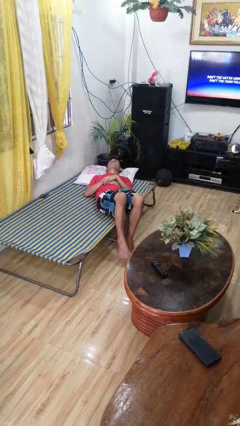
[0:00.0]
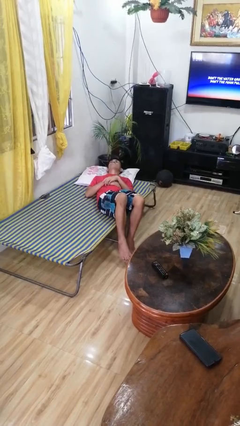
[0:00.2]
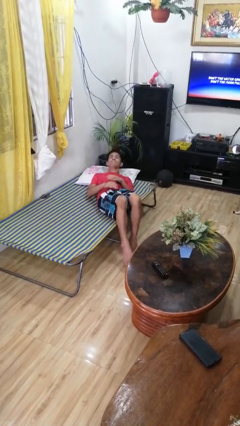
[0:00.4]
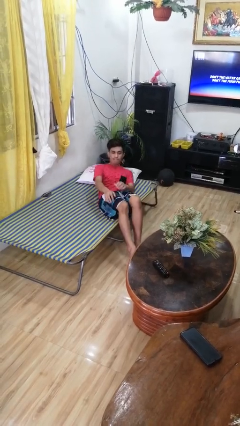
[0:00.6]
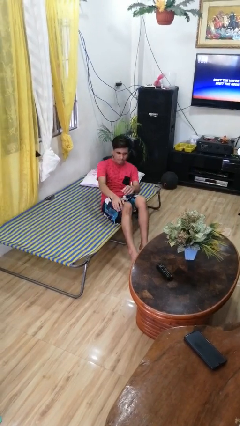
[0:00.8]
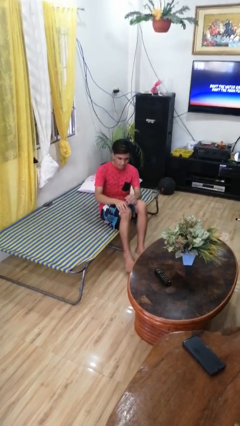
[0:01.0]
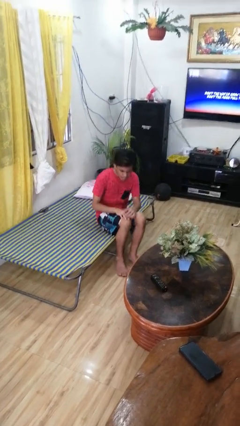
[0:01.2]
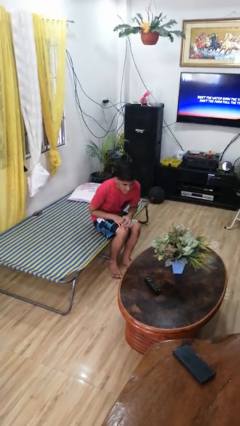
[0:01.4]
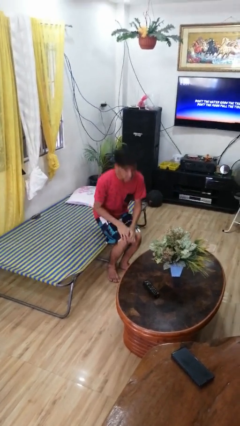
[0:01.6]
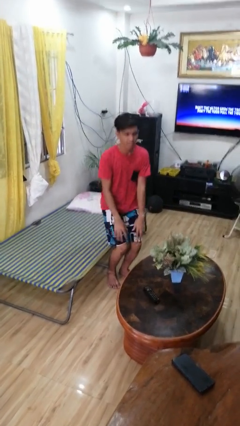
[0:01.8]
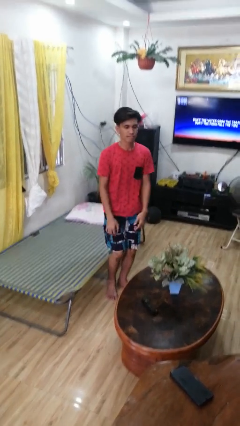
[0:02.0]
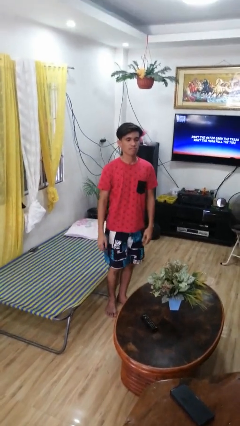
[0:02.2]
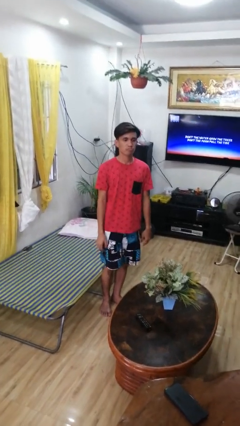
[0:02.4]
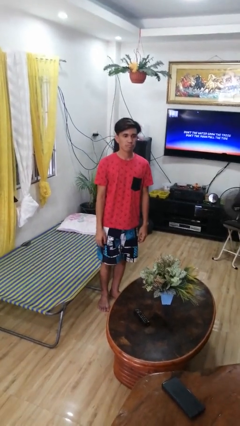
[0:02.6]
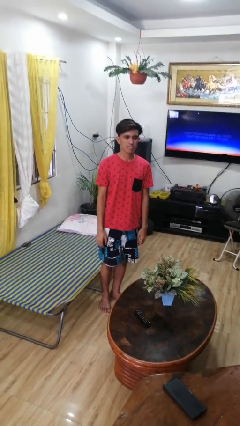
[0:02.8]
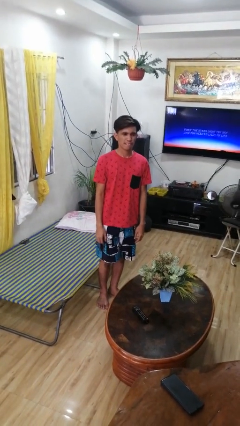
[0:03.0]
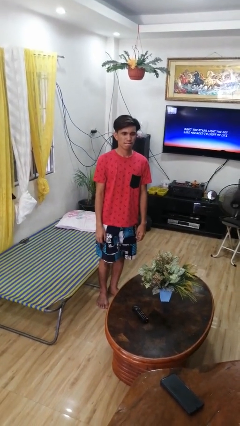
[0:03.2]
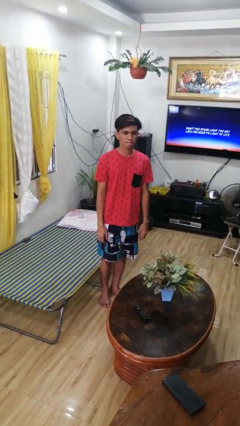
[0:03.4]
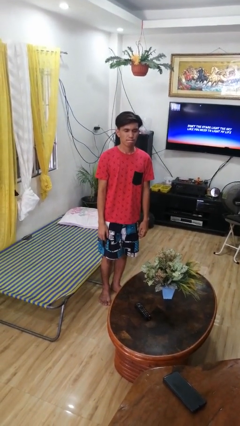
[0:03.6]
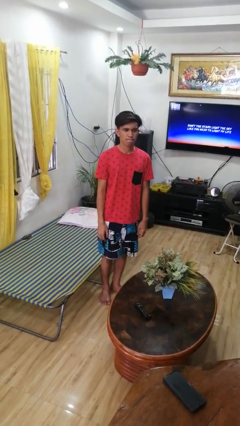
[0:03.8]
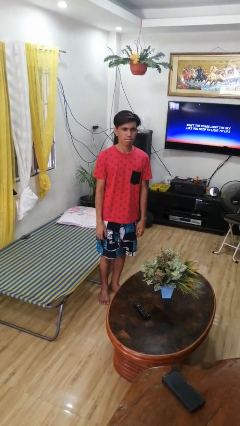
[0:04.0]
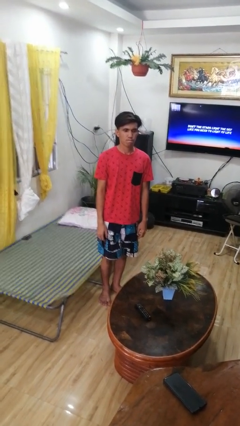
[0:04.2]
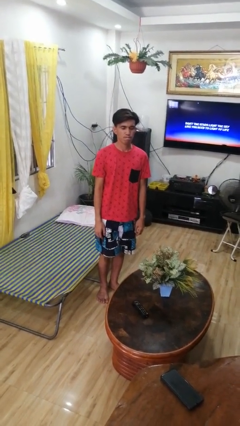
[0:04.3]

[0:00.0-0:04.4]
person stands up

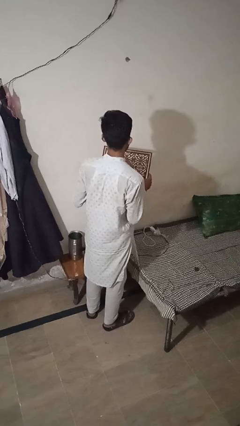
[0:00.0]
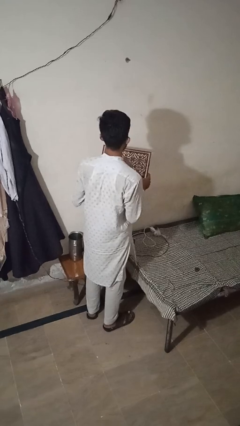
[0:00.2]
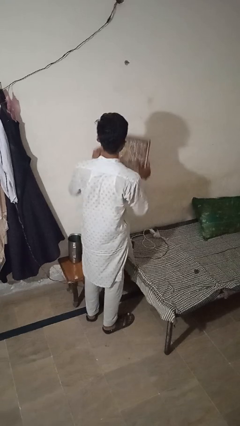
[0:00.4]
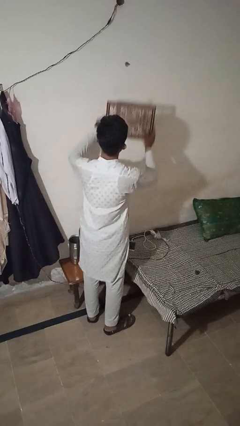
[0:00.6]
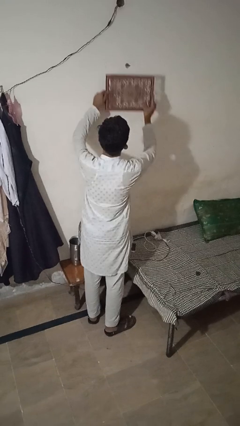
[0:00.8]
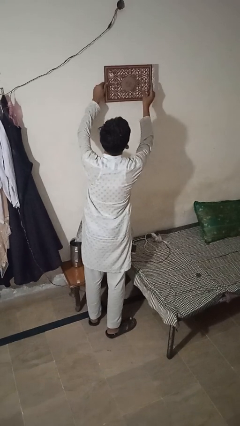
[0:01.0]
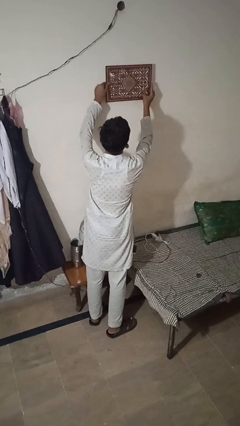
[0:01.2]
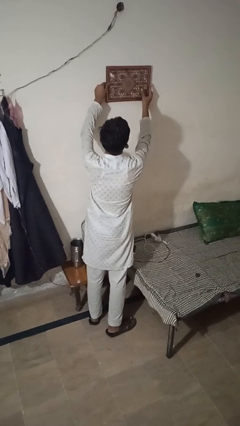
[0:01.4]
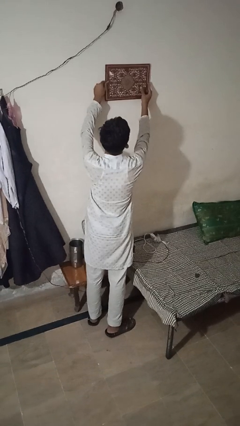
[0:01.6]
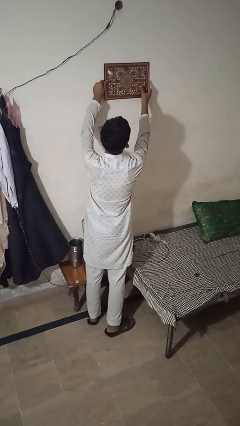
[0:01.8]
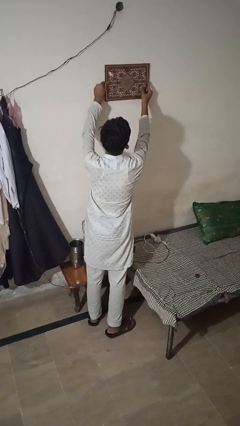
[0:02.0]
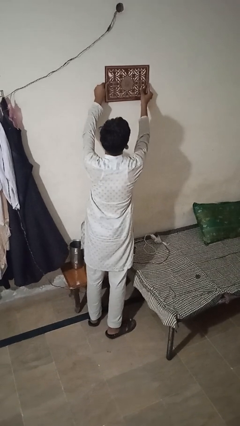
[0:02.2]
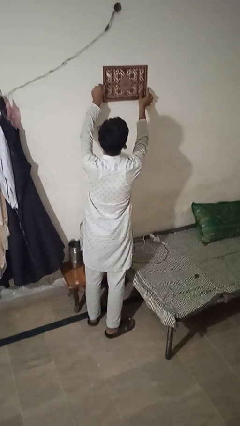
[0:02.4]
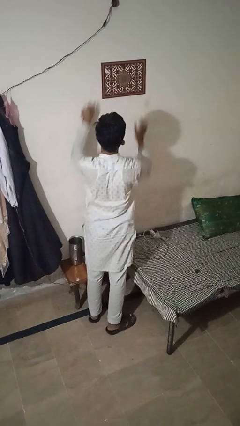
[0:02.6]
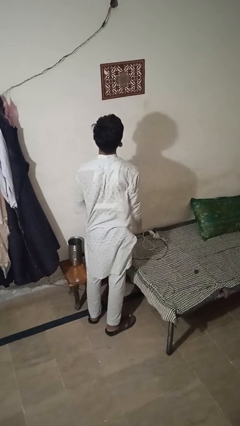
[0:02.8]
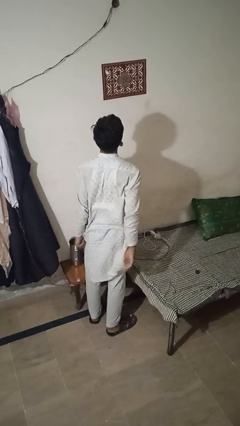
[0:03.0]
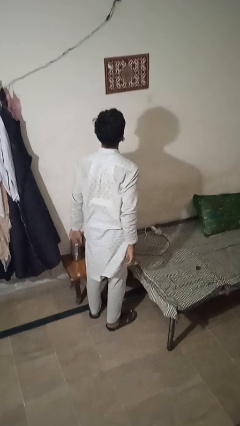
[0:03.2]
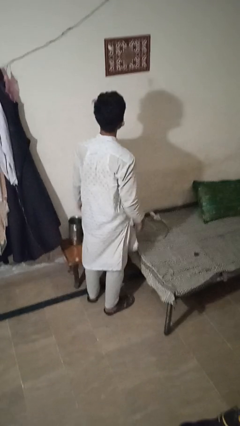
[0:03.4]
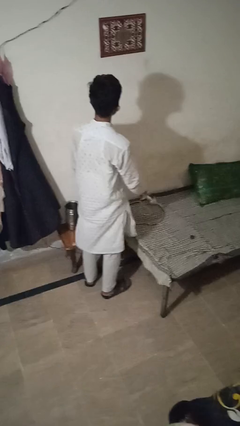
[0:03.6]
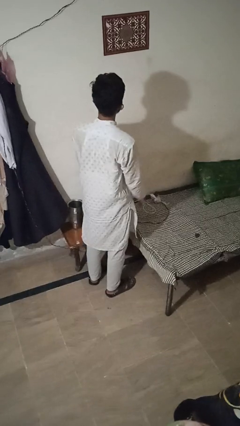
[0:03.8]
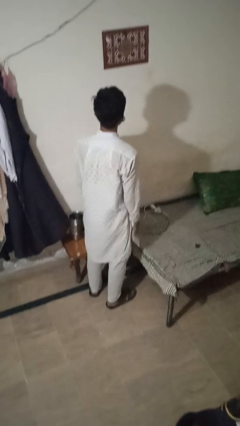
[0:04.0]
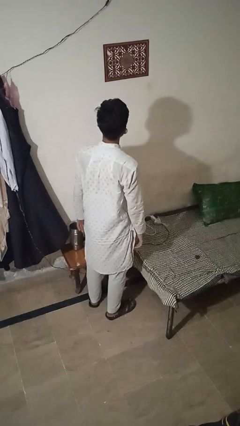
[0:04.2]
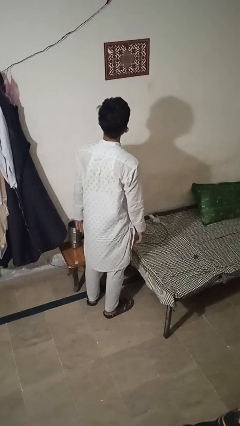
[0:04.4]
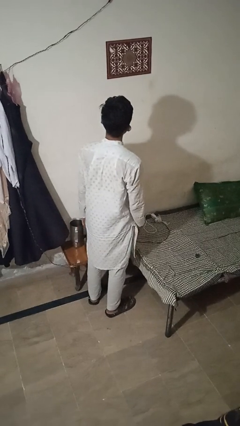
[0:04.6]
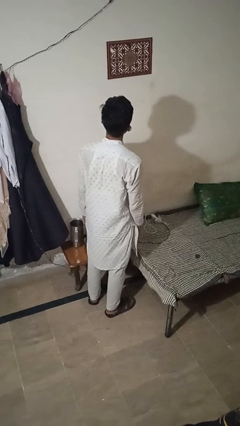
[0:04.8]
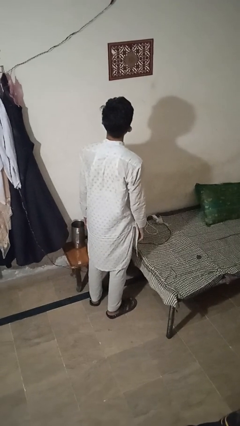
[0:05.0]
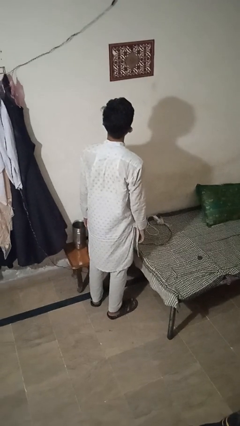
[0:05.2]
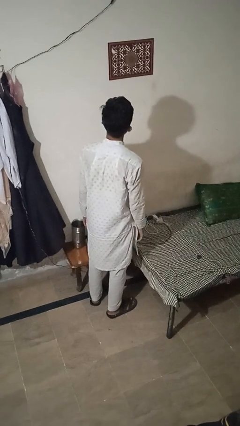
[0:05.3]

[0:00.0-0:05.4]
person puts up picture frame

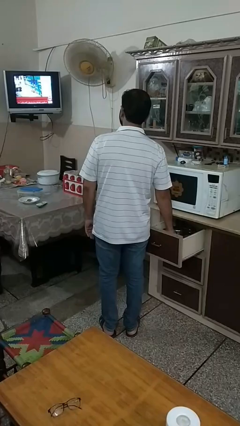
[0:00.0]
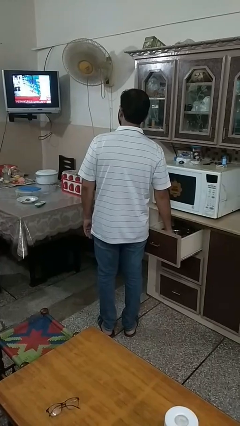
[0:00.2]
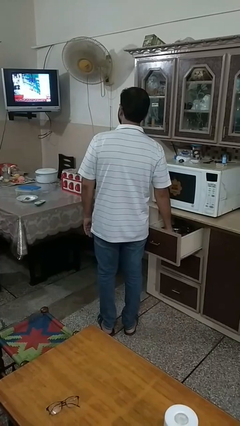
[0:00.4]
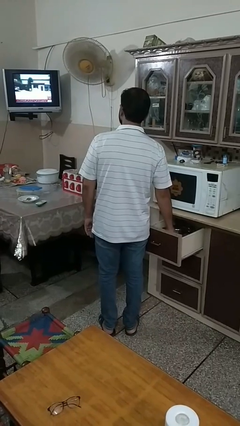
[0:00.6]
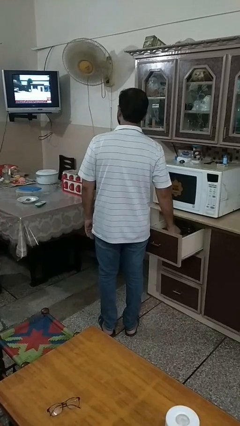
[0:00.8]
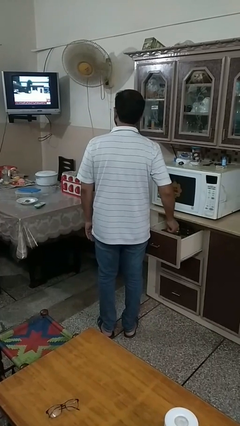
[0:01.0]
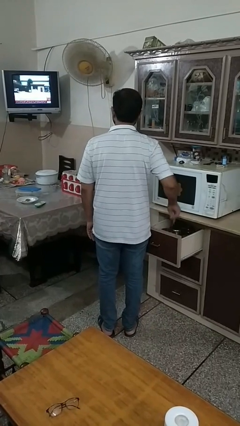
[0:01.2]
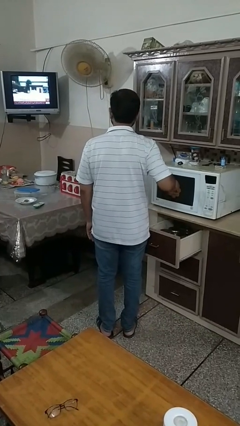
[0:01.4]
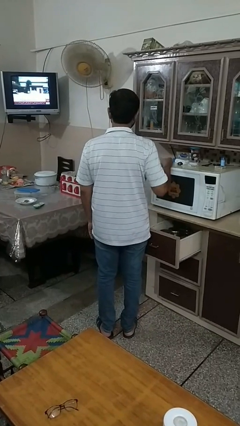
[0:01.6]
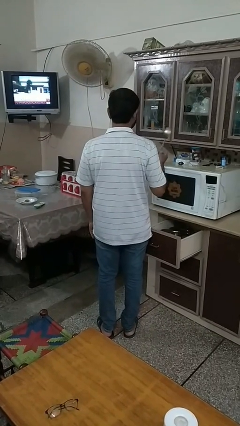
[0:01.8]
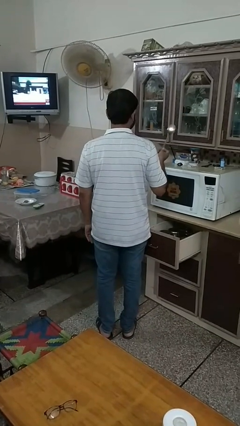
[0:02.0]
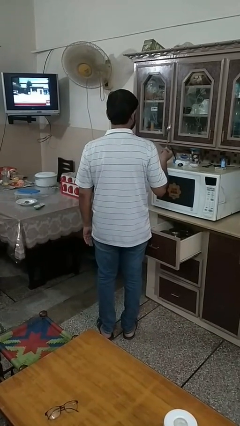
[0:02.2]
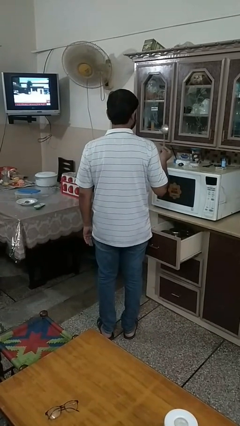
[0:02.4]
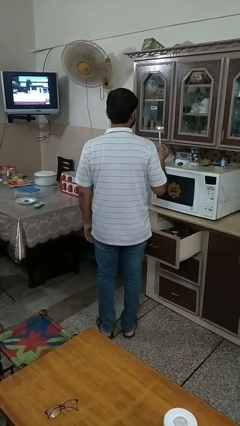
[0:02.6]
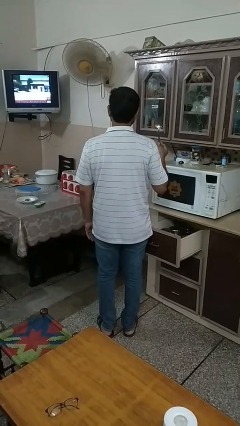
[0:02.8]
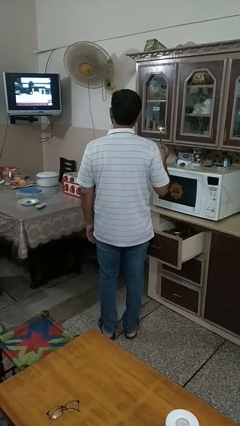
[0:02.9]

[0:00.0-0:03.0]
person takes object from kitchen drawer

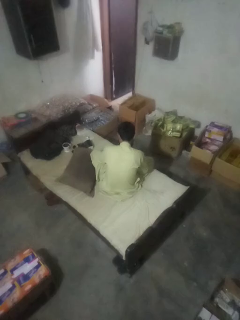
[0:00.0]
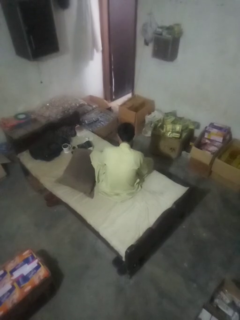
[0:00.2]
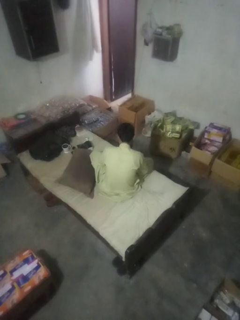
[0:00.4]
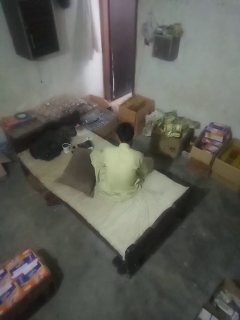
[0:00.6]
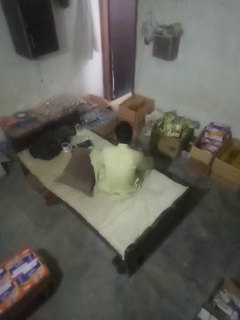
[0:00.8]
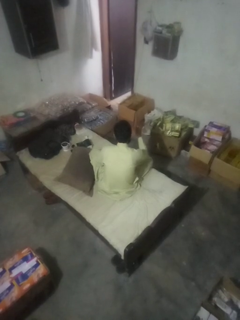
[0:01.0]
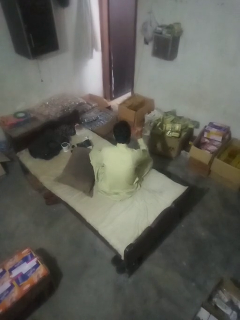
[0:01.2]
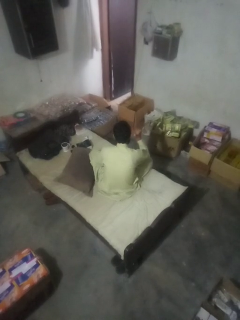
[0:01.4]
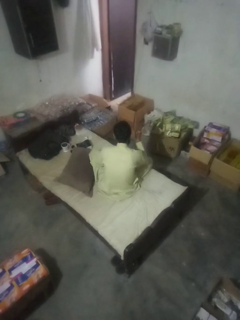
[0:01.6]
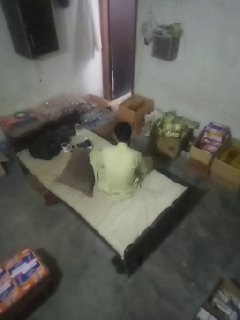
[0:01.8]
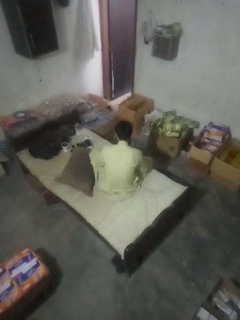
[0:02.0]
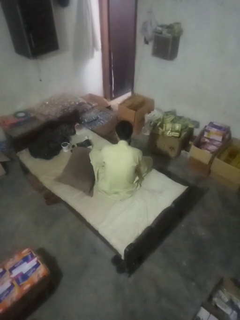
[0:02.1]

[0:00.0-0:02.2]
person gestures behind me

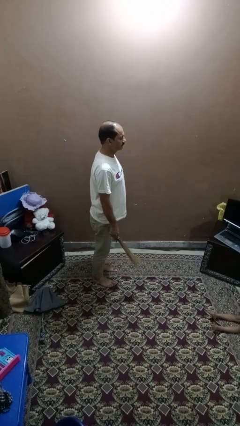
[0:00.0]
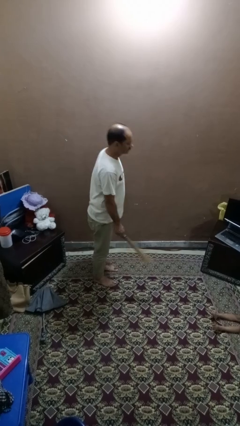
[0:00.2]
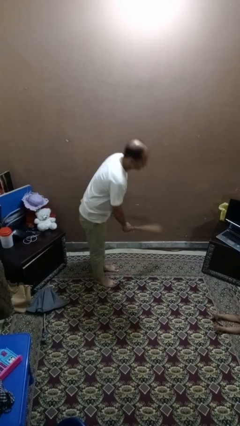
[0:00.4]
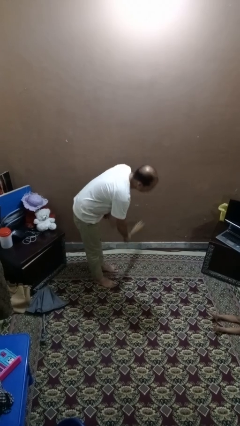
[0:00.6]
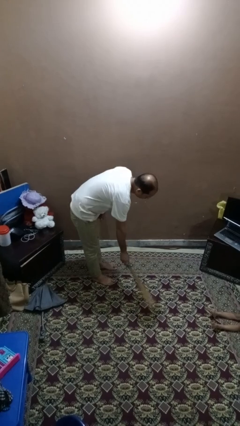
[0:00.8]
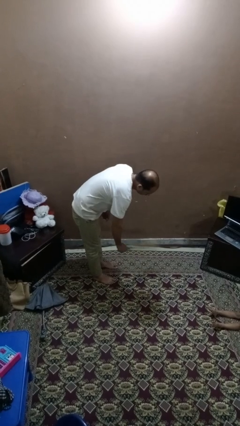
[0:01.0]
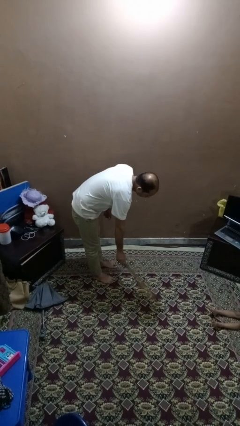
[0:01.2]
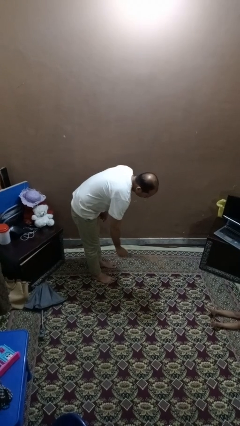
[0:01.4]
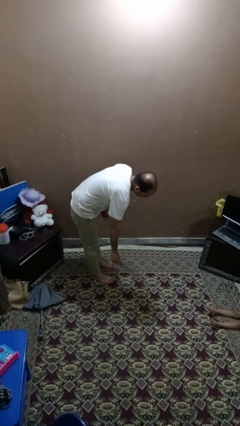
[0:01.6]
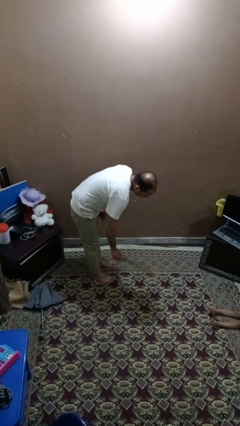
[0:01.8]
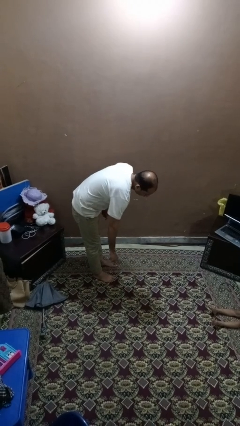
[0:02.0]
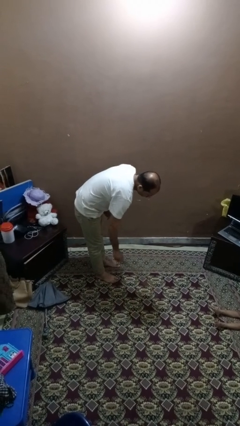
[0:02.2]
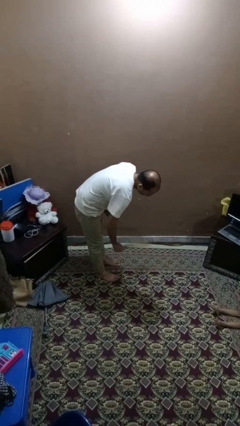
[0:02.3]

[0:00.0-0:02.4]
person sweeps floor

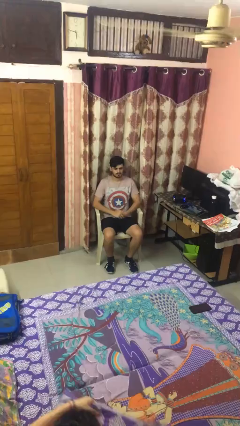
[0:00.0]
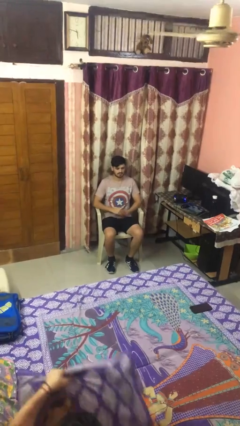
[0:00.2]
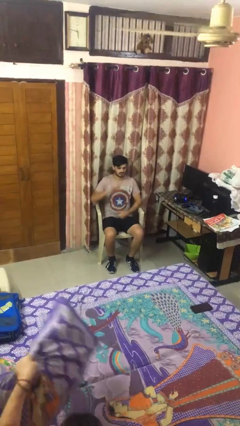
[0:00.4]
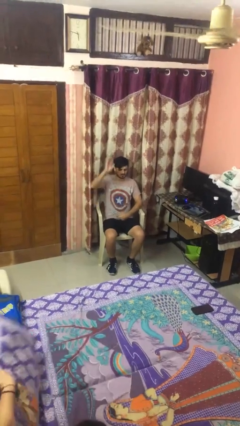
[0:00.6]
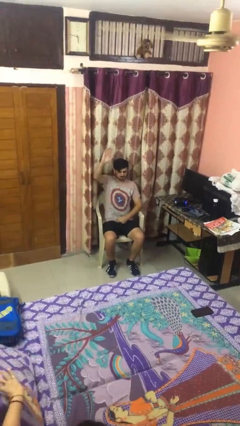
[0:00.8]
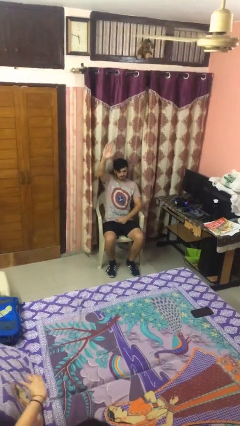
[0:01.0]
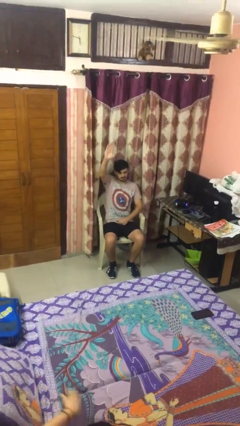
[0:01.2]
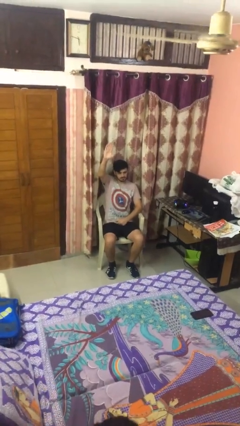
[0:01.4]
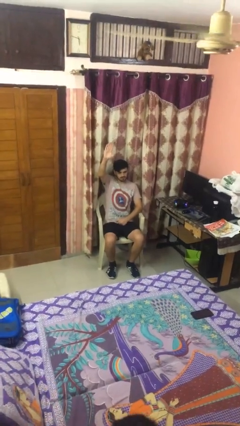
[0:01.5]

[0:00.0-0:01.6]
person gestures raise hand